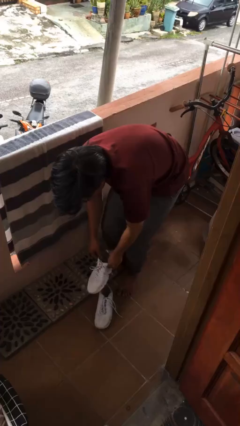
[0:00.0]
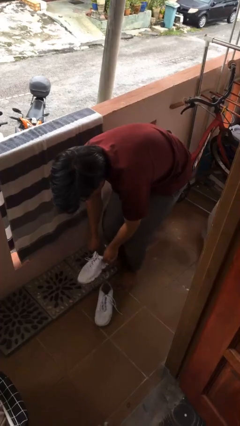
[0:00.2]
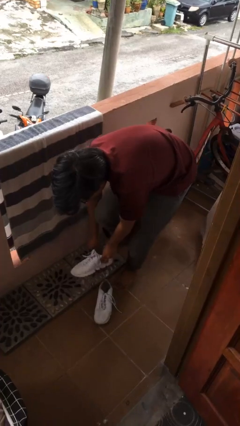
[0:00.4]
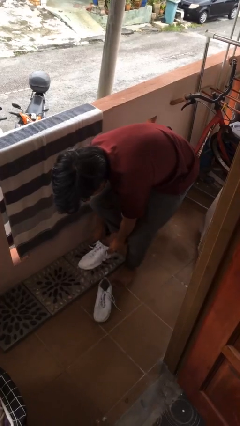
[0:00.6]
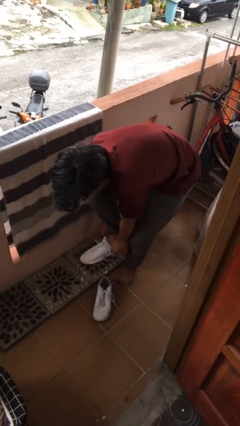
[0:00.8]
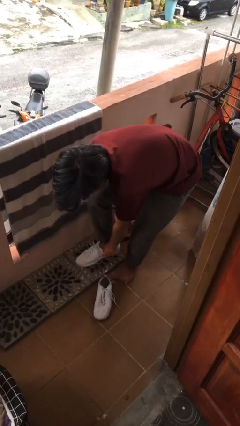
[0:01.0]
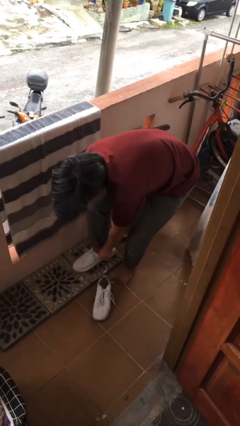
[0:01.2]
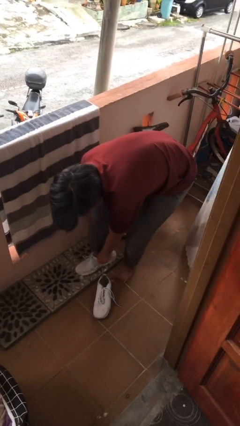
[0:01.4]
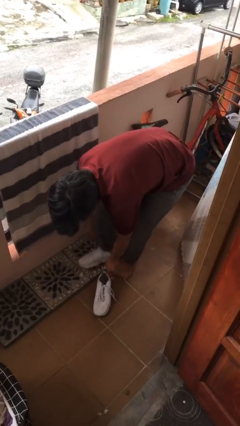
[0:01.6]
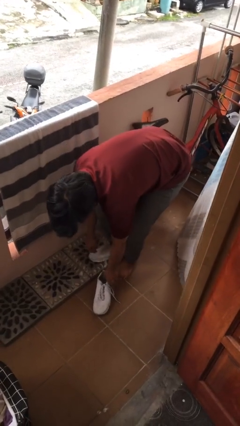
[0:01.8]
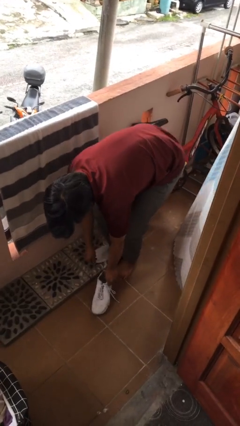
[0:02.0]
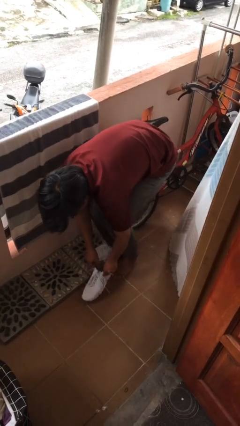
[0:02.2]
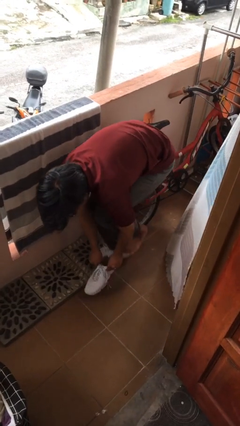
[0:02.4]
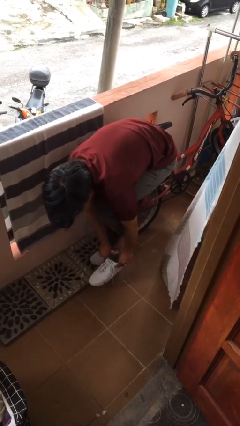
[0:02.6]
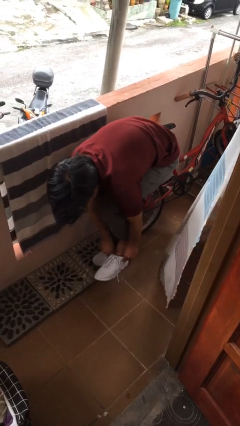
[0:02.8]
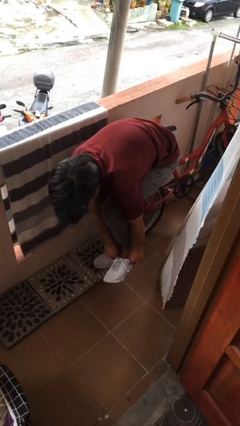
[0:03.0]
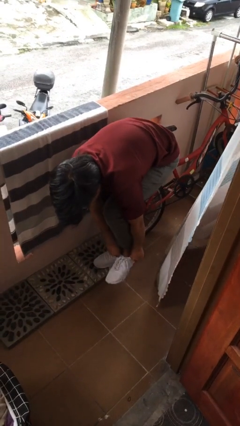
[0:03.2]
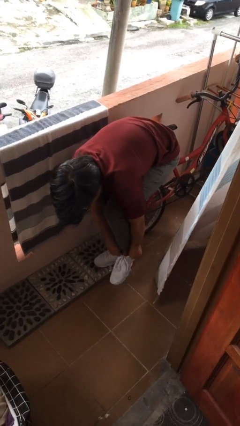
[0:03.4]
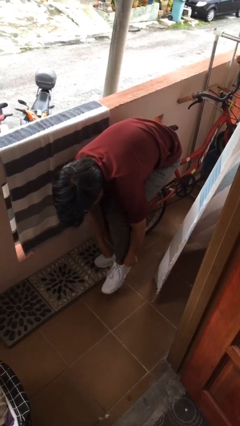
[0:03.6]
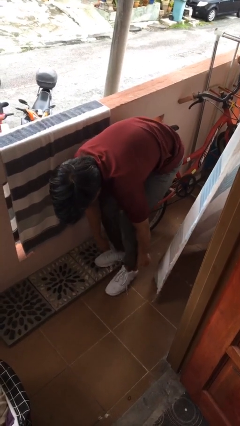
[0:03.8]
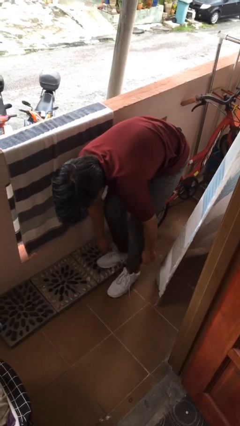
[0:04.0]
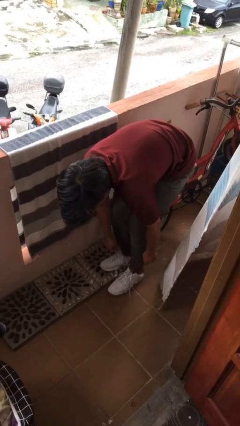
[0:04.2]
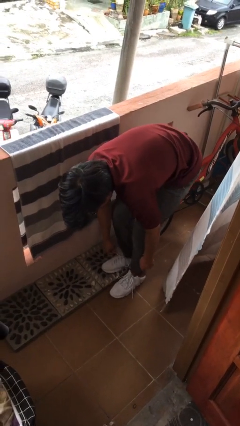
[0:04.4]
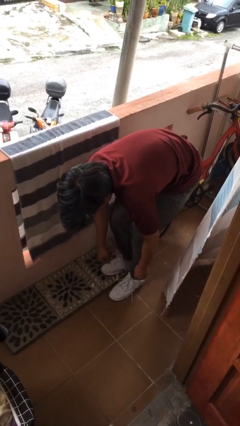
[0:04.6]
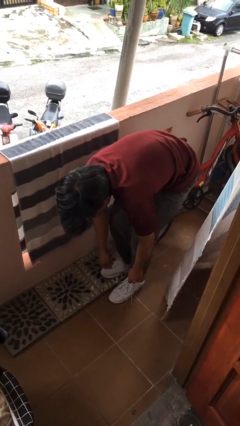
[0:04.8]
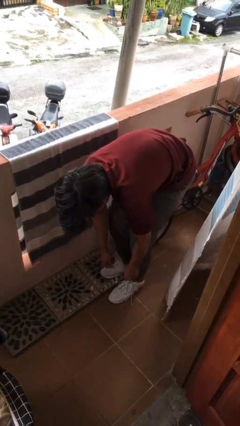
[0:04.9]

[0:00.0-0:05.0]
person puts on shoes

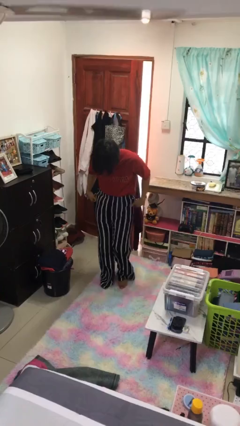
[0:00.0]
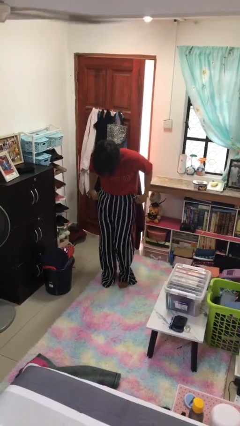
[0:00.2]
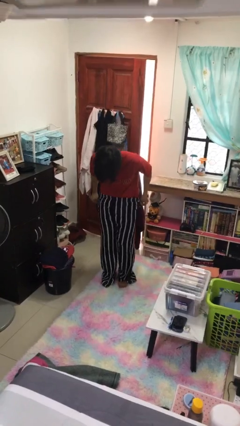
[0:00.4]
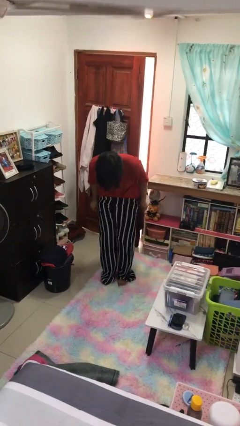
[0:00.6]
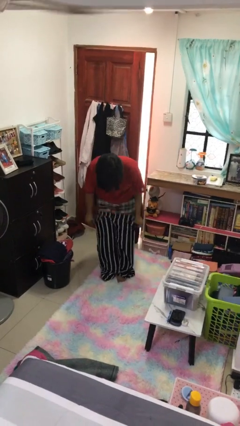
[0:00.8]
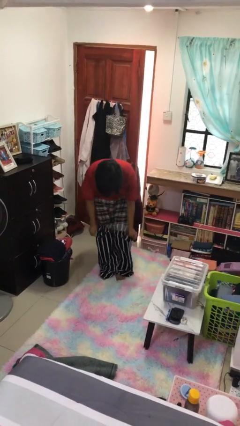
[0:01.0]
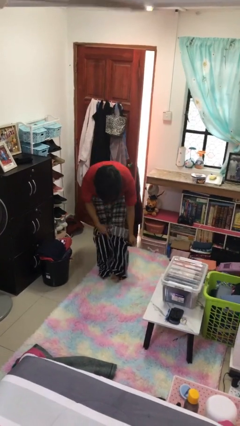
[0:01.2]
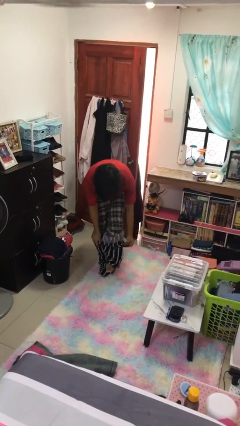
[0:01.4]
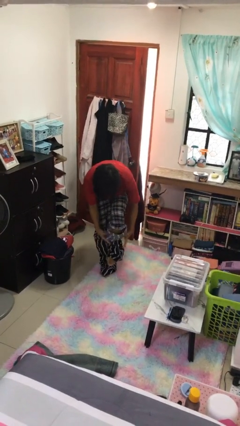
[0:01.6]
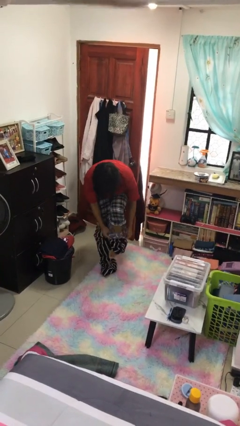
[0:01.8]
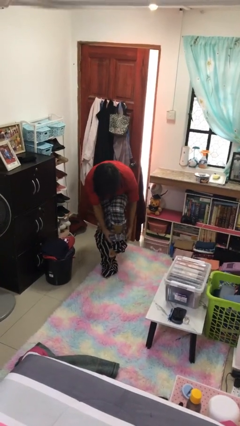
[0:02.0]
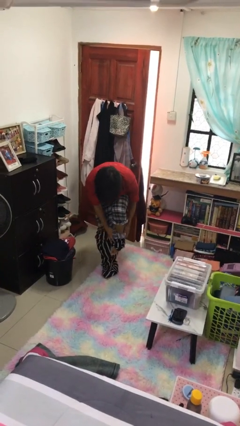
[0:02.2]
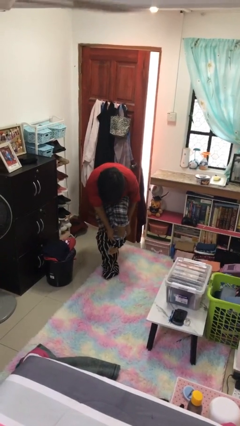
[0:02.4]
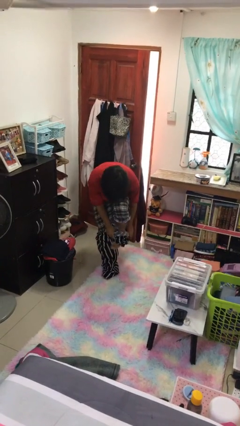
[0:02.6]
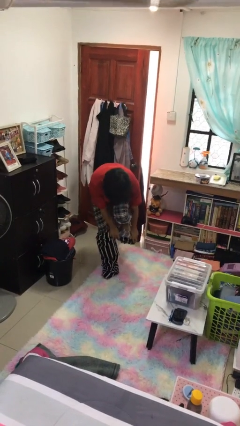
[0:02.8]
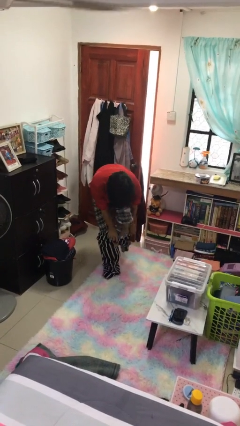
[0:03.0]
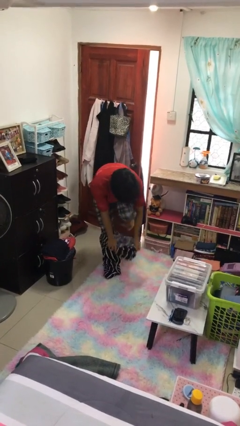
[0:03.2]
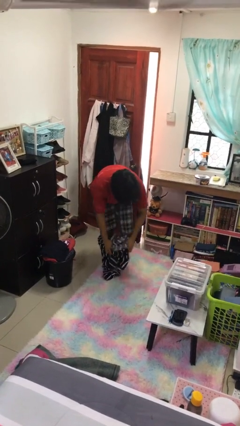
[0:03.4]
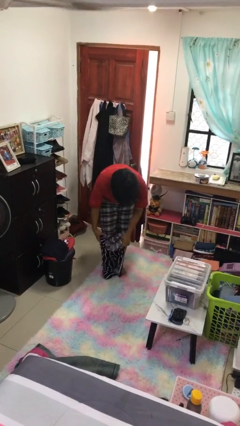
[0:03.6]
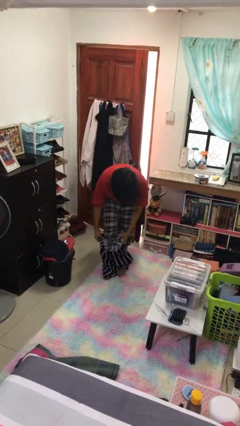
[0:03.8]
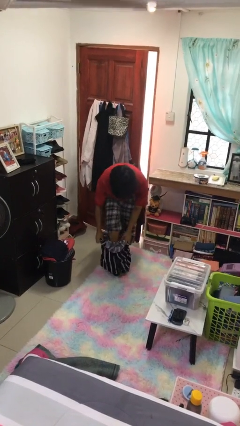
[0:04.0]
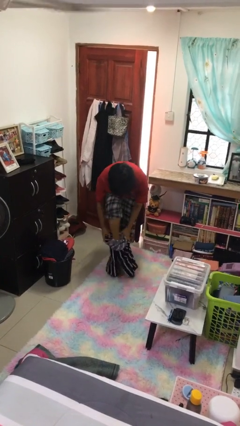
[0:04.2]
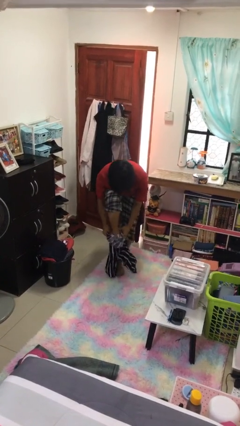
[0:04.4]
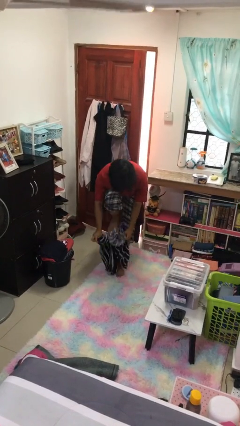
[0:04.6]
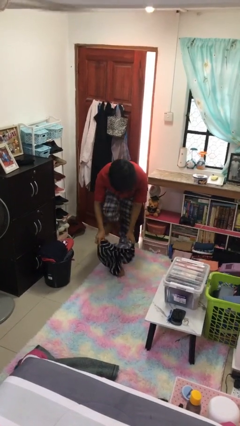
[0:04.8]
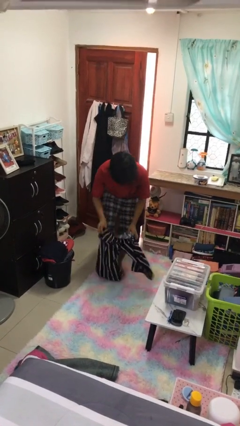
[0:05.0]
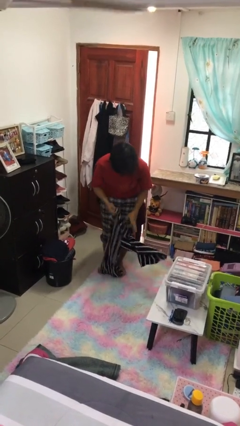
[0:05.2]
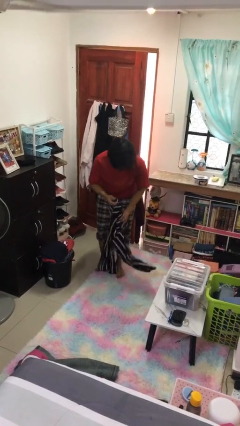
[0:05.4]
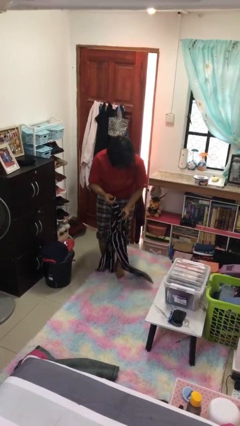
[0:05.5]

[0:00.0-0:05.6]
person takes off pants

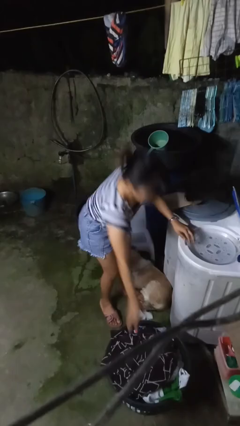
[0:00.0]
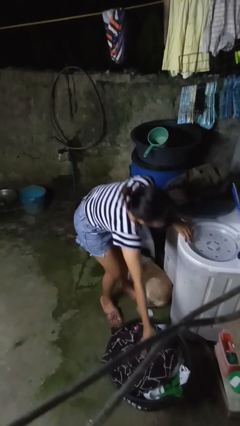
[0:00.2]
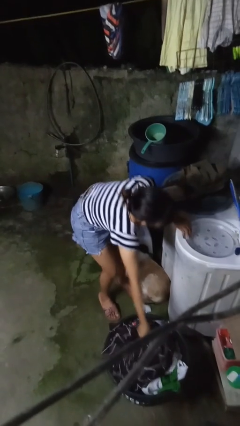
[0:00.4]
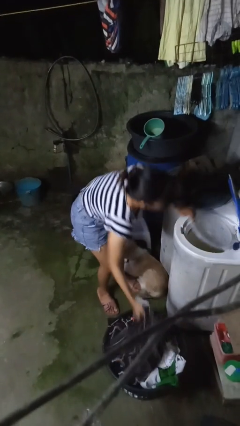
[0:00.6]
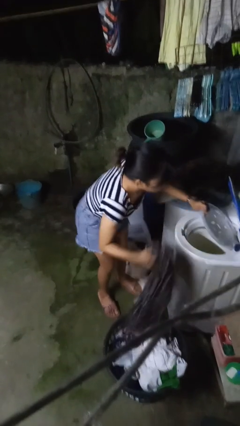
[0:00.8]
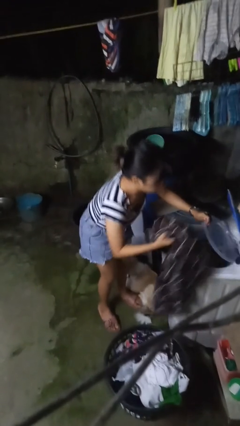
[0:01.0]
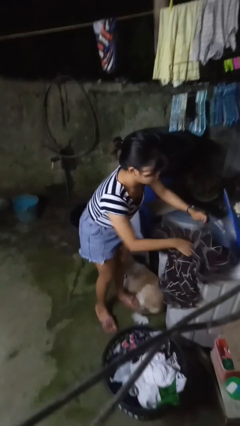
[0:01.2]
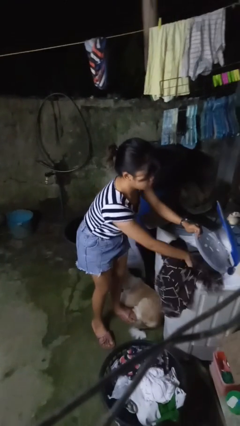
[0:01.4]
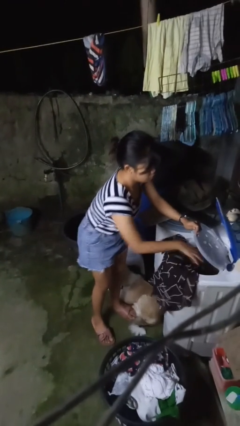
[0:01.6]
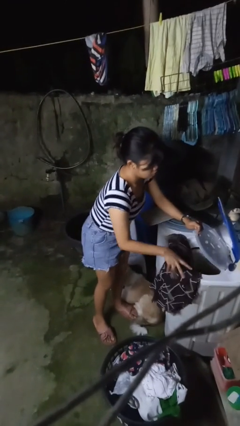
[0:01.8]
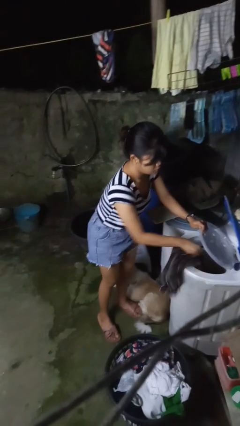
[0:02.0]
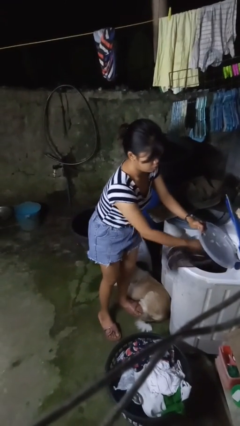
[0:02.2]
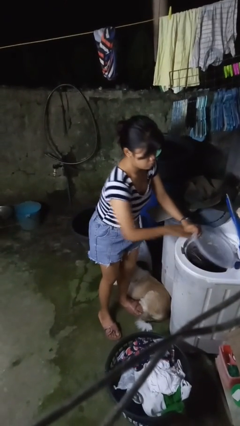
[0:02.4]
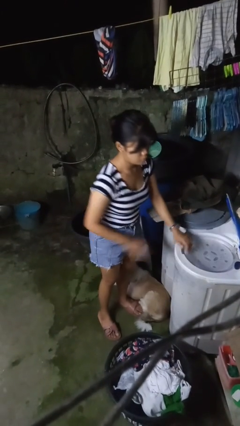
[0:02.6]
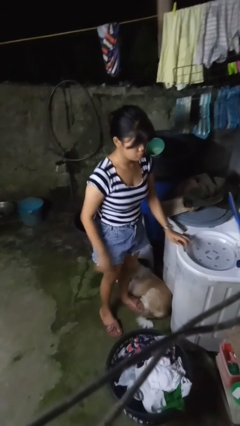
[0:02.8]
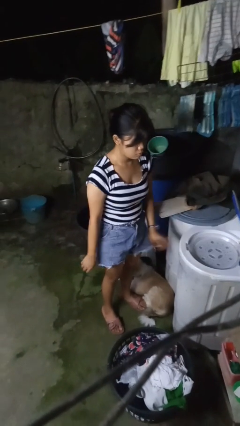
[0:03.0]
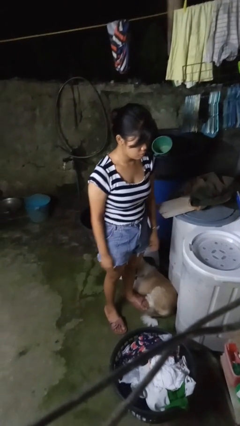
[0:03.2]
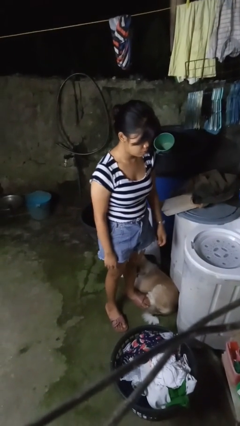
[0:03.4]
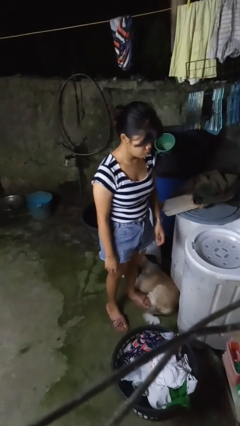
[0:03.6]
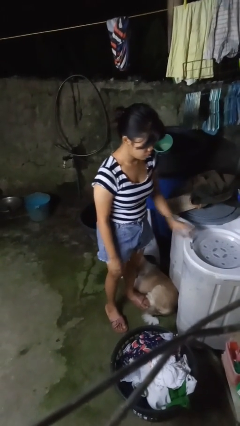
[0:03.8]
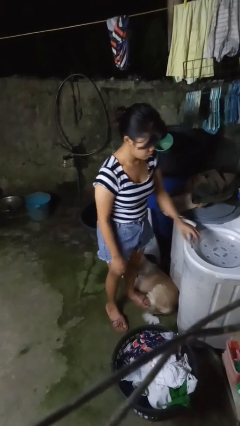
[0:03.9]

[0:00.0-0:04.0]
person loads dryer

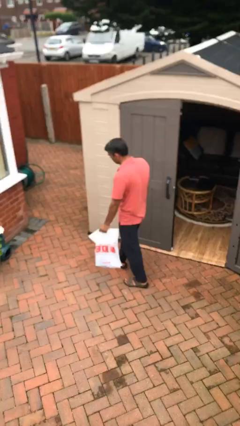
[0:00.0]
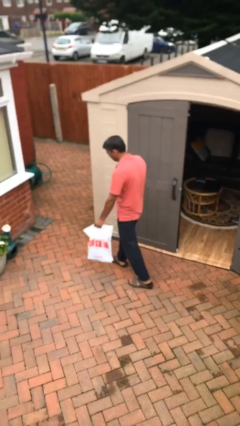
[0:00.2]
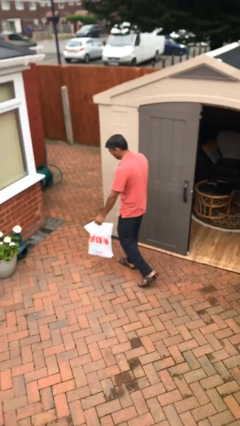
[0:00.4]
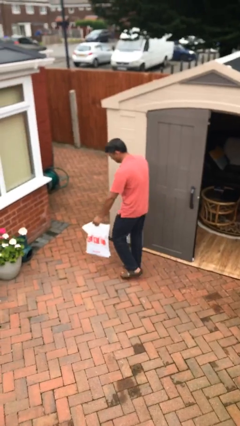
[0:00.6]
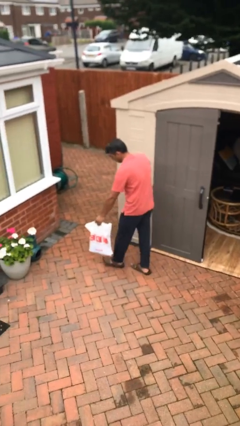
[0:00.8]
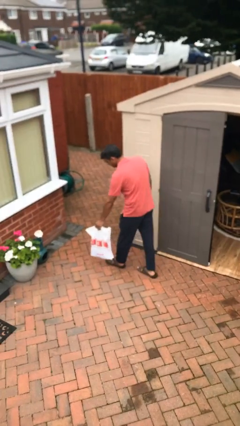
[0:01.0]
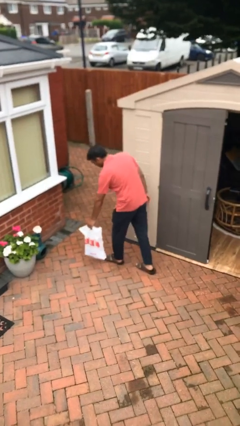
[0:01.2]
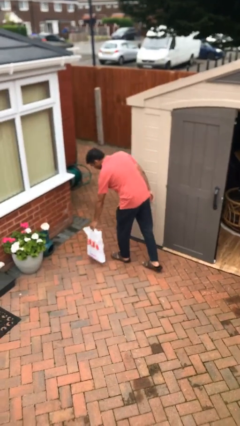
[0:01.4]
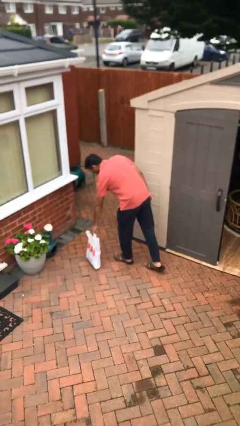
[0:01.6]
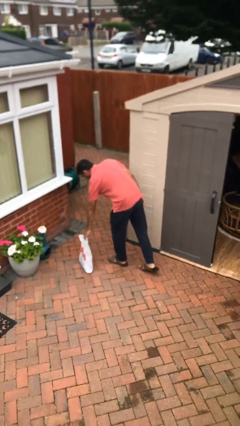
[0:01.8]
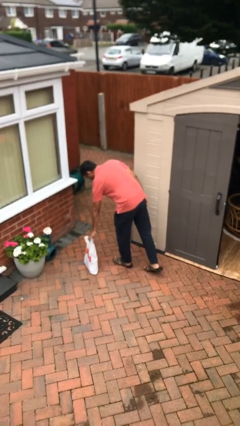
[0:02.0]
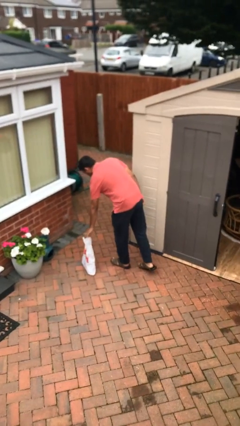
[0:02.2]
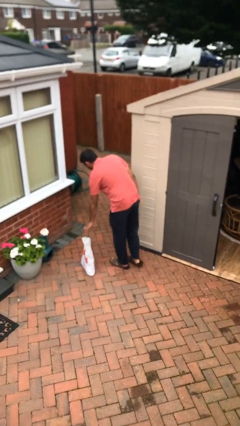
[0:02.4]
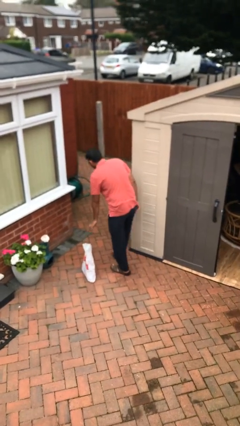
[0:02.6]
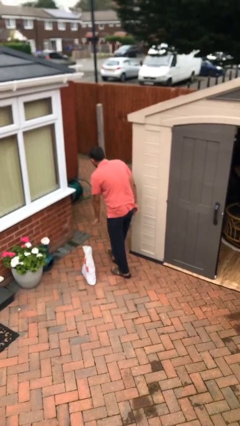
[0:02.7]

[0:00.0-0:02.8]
person puts down object on floor

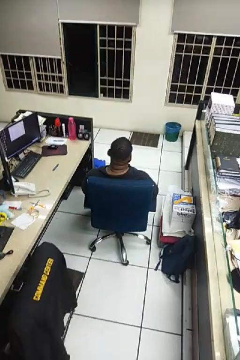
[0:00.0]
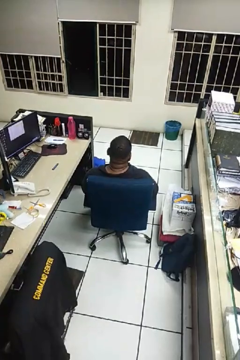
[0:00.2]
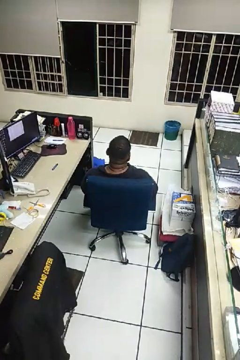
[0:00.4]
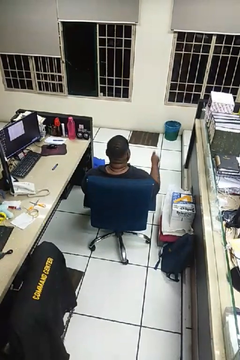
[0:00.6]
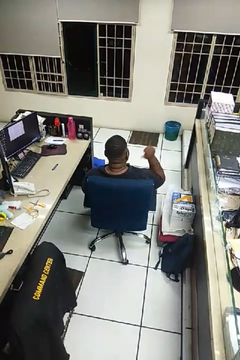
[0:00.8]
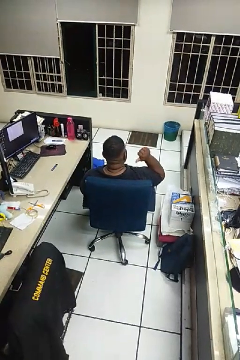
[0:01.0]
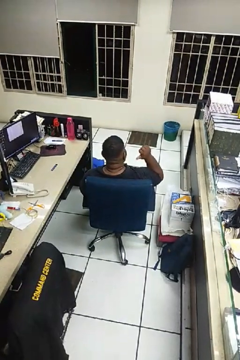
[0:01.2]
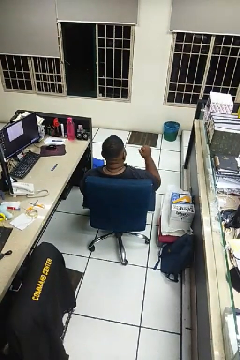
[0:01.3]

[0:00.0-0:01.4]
person gestures behind me
